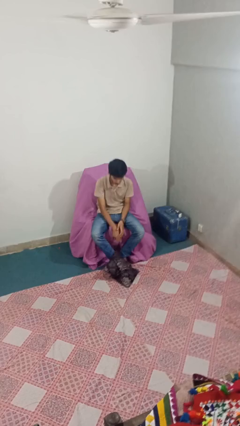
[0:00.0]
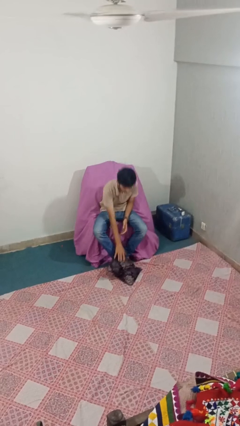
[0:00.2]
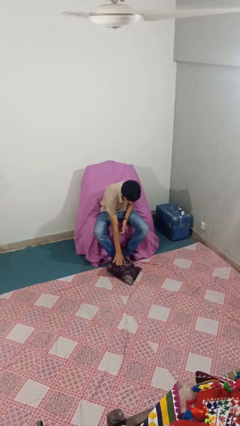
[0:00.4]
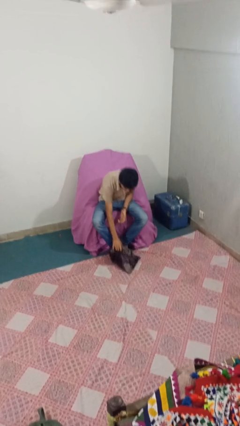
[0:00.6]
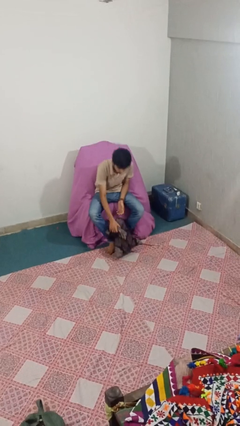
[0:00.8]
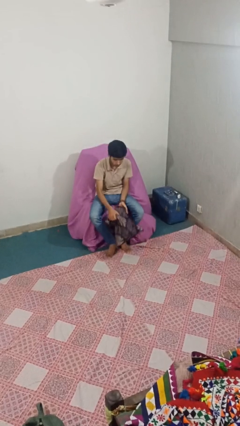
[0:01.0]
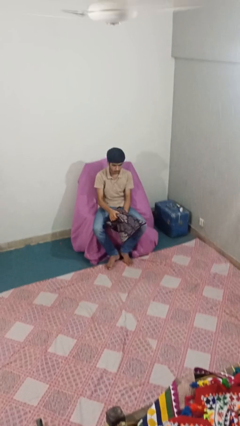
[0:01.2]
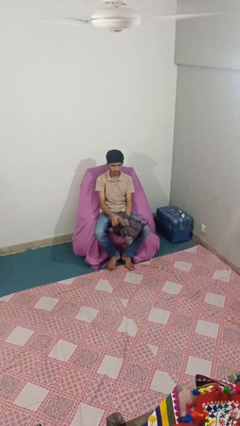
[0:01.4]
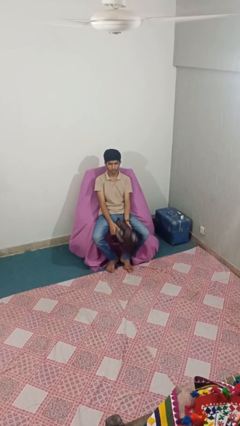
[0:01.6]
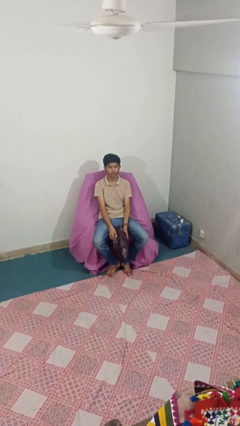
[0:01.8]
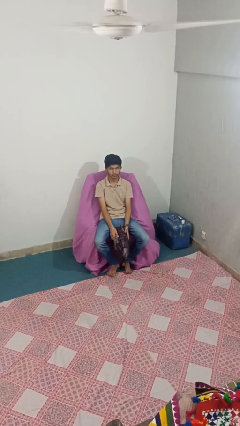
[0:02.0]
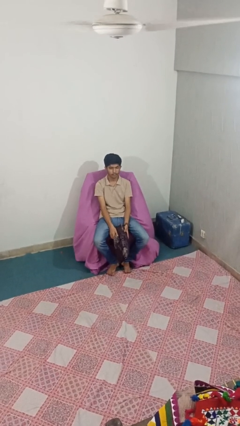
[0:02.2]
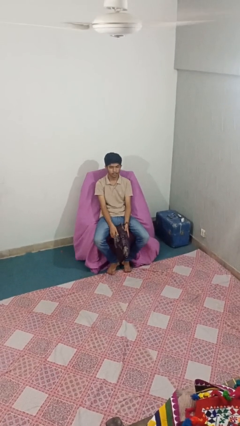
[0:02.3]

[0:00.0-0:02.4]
person picks up object from floor

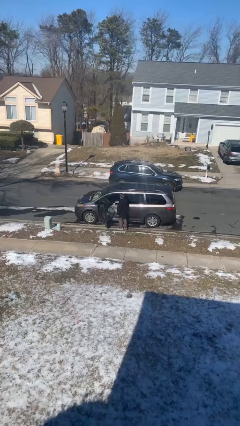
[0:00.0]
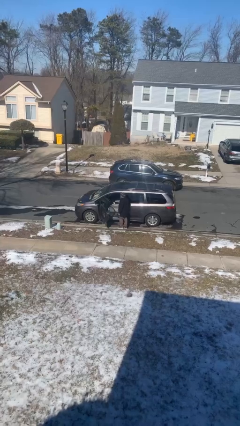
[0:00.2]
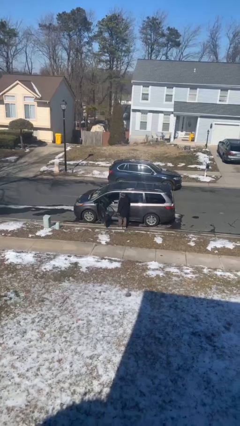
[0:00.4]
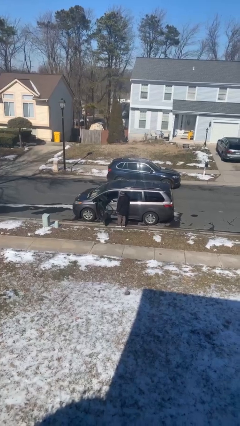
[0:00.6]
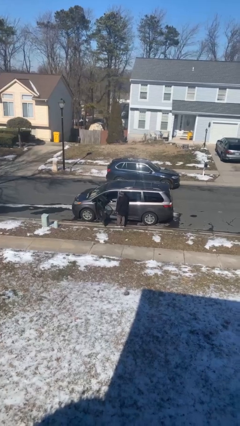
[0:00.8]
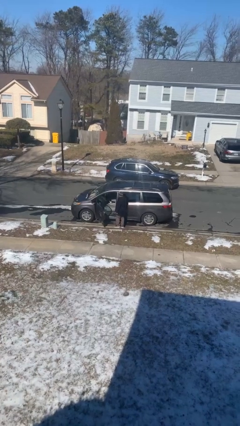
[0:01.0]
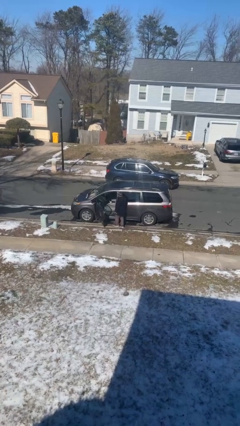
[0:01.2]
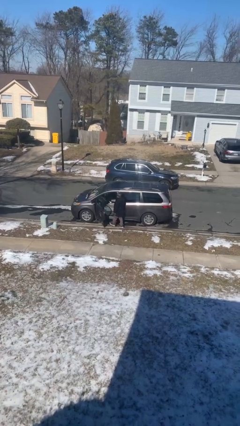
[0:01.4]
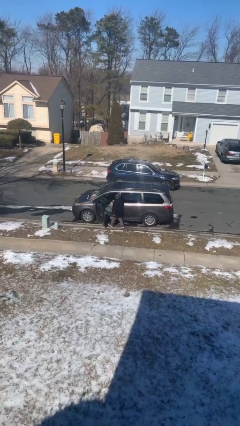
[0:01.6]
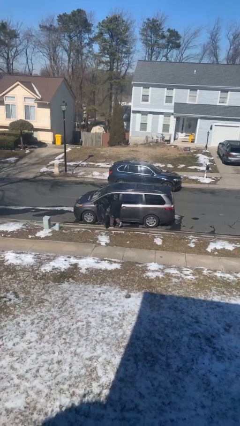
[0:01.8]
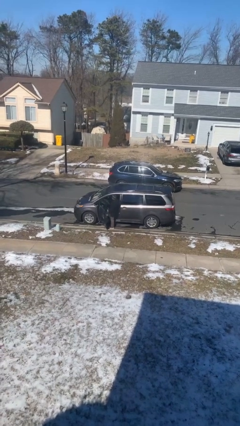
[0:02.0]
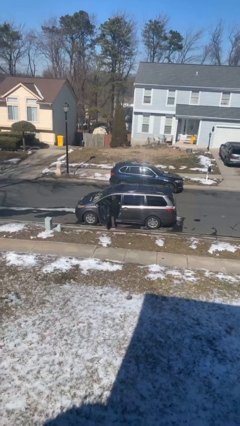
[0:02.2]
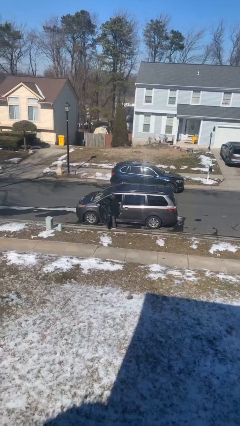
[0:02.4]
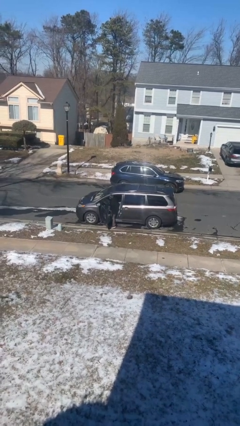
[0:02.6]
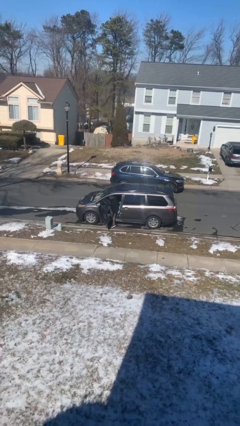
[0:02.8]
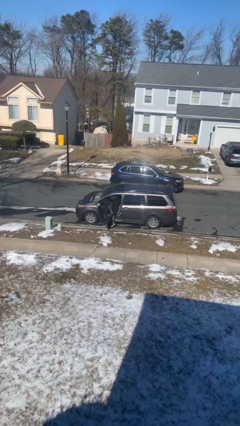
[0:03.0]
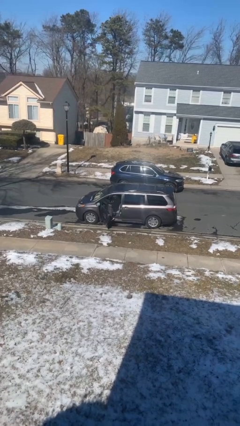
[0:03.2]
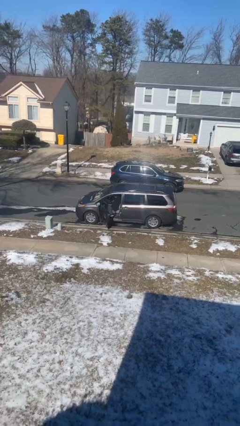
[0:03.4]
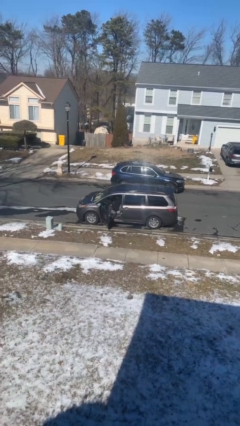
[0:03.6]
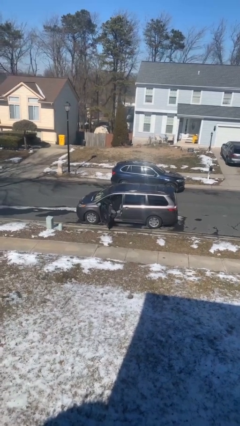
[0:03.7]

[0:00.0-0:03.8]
person enters car

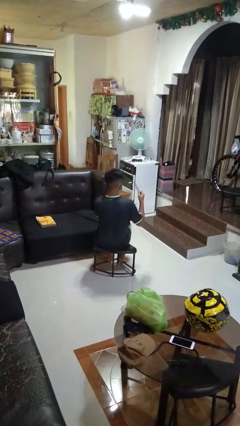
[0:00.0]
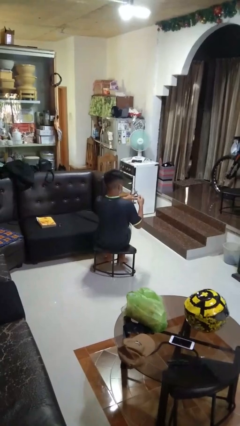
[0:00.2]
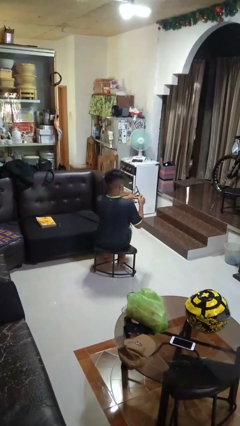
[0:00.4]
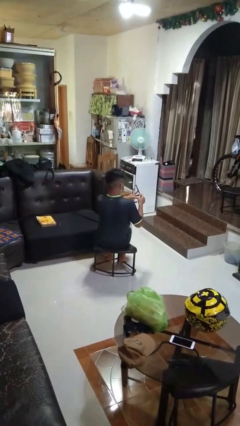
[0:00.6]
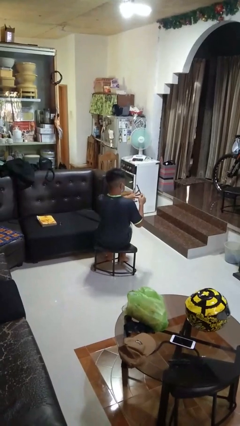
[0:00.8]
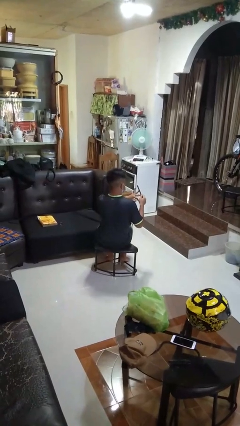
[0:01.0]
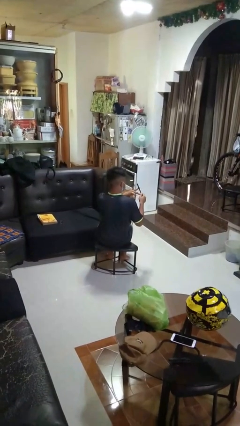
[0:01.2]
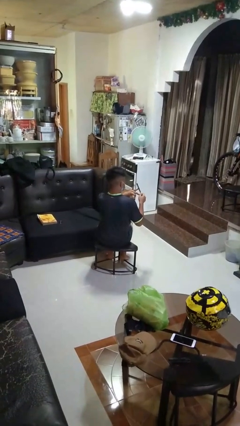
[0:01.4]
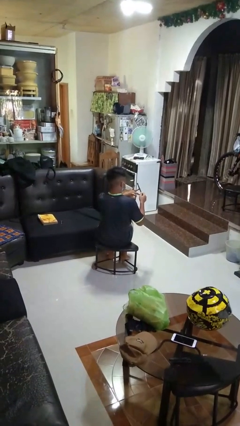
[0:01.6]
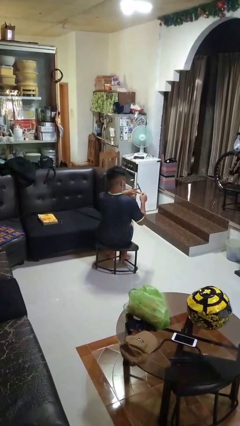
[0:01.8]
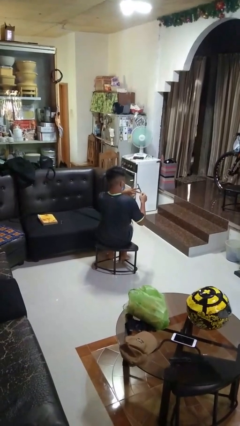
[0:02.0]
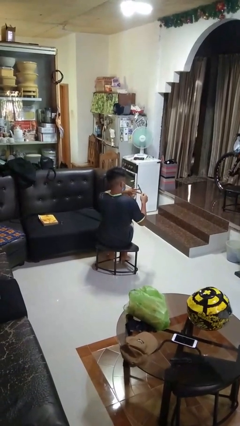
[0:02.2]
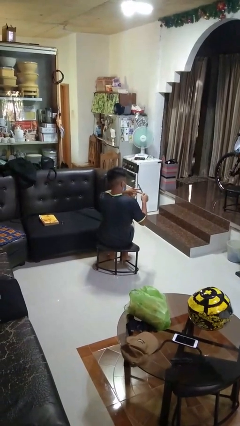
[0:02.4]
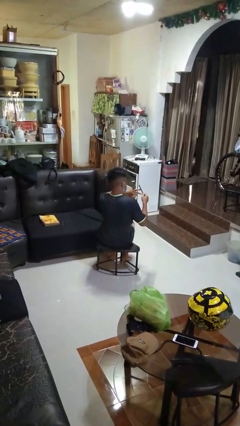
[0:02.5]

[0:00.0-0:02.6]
person files fingernails

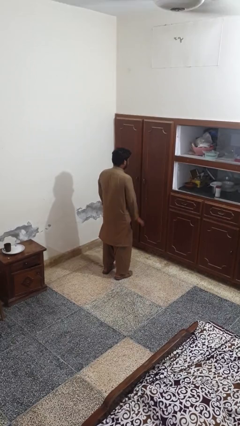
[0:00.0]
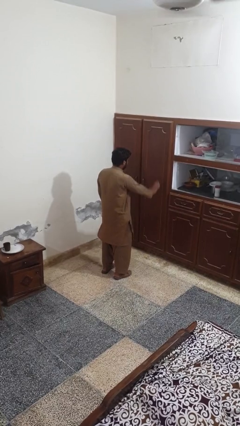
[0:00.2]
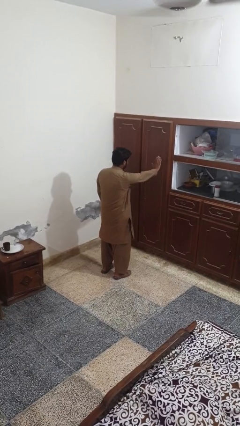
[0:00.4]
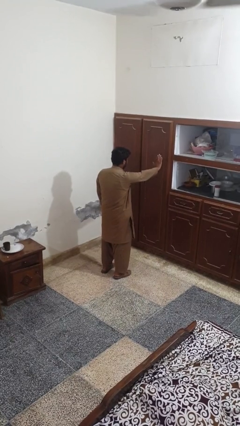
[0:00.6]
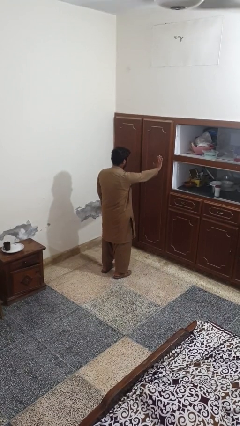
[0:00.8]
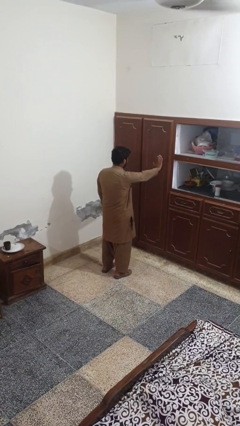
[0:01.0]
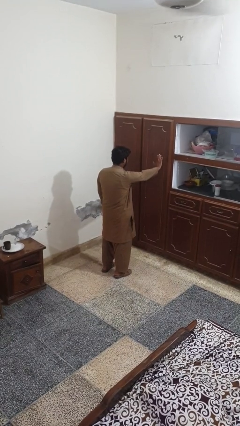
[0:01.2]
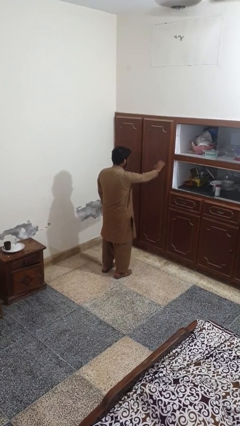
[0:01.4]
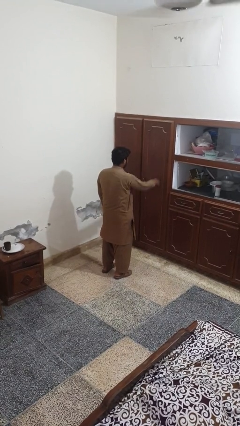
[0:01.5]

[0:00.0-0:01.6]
person gestures stop

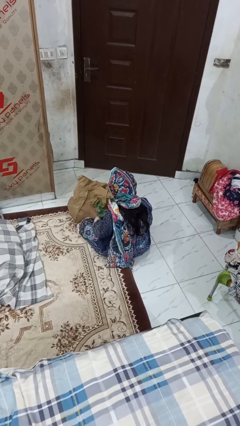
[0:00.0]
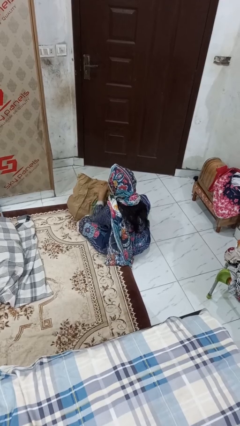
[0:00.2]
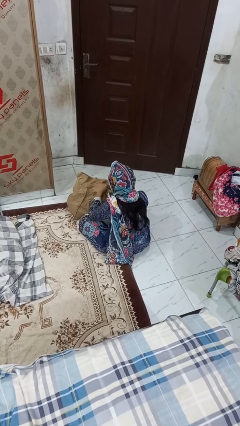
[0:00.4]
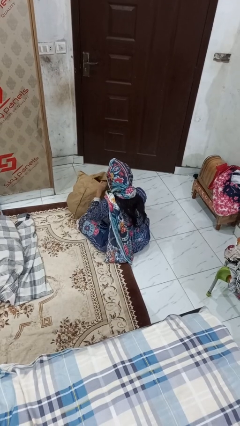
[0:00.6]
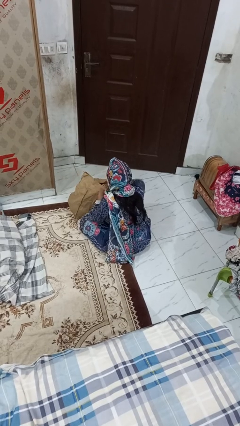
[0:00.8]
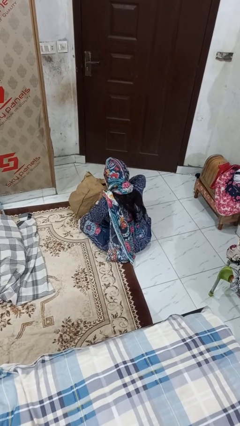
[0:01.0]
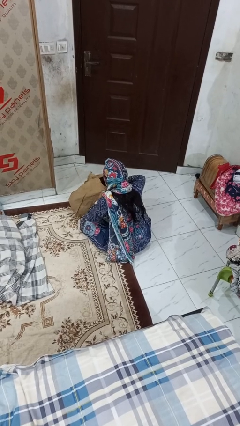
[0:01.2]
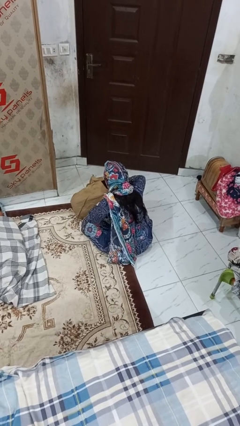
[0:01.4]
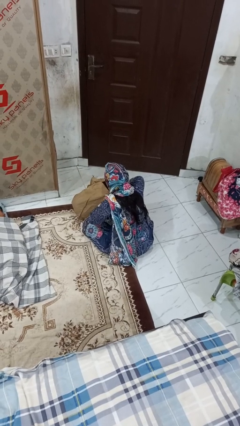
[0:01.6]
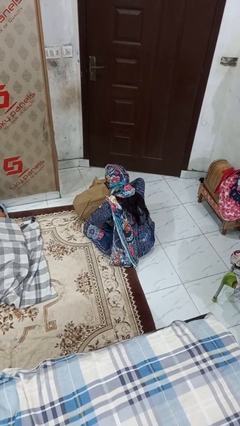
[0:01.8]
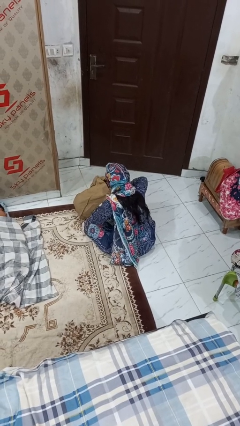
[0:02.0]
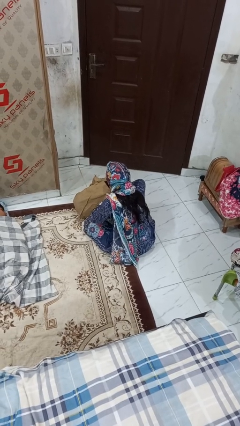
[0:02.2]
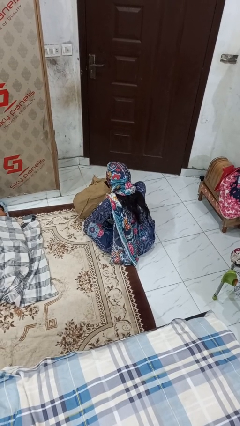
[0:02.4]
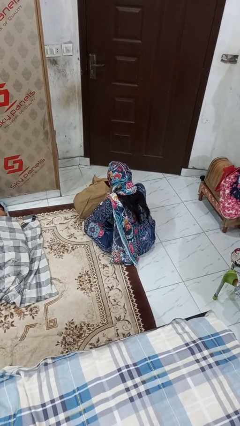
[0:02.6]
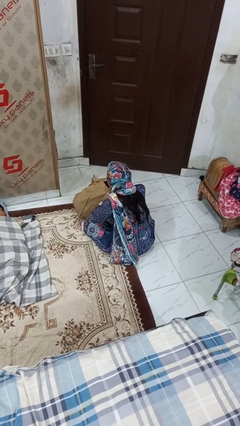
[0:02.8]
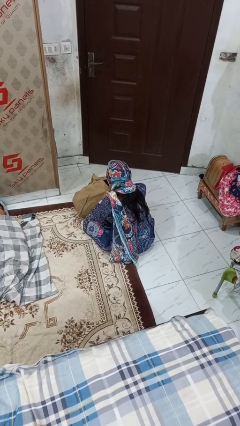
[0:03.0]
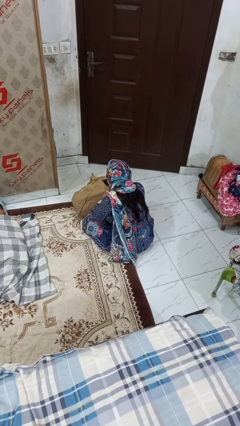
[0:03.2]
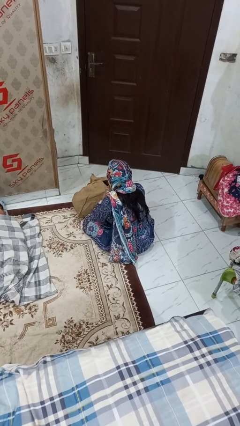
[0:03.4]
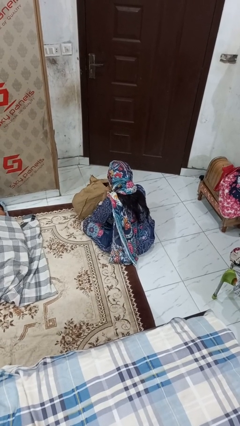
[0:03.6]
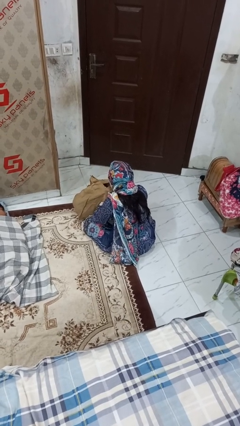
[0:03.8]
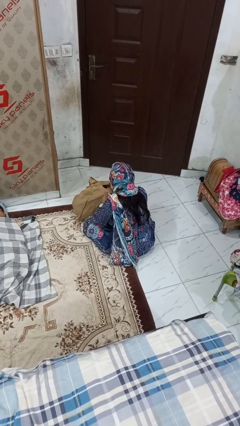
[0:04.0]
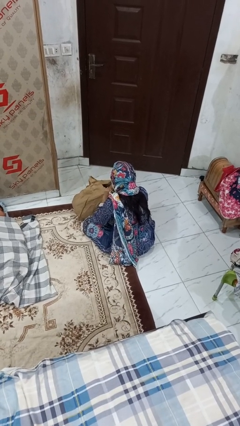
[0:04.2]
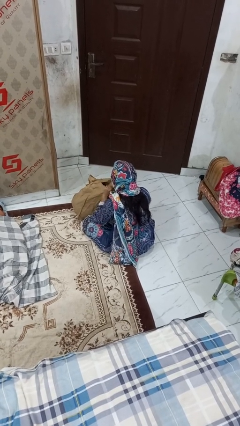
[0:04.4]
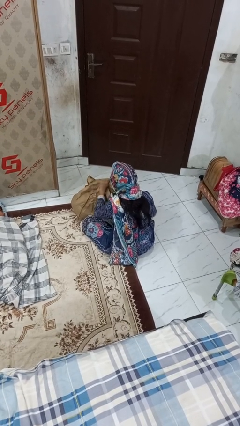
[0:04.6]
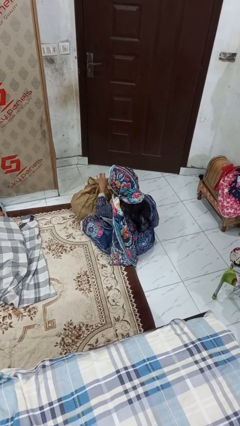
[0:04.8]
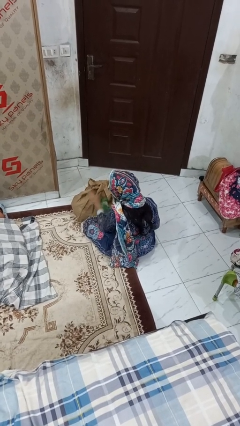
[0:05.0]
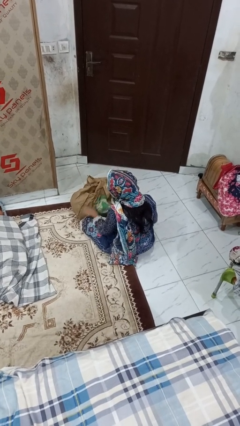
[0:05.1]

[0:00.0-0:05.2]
person searches in bag

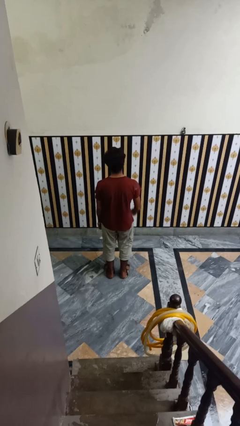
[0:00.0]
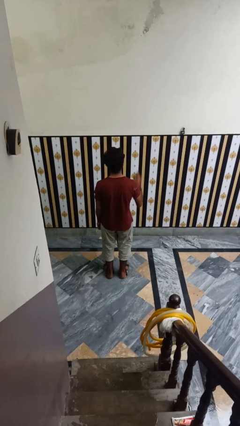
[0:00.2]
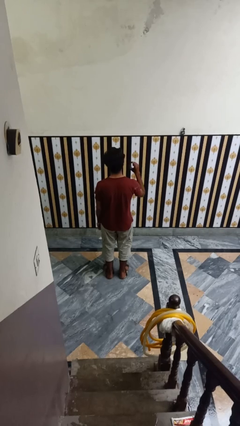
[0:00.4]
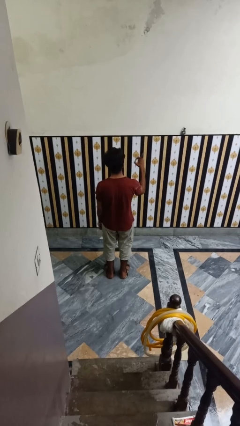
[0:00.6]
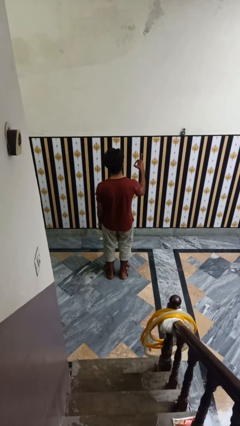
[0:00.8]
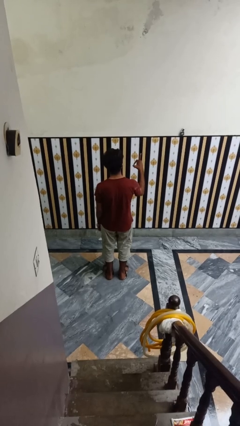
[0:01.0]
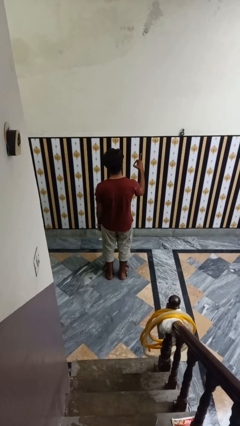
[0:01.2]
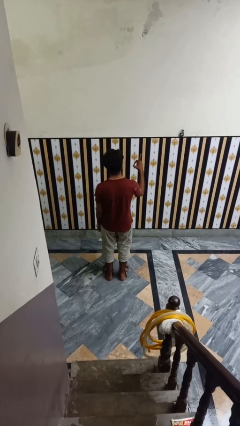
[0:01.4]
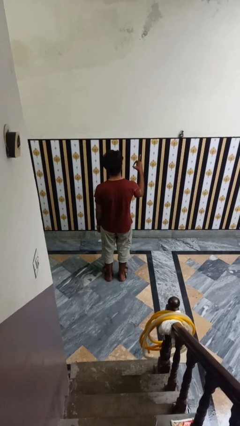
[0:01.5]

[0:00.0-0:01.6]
person gestures number one
